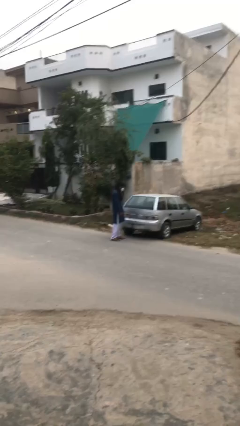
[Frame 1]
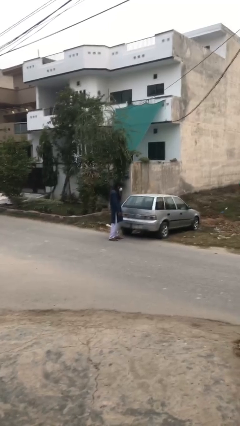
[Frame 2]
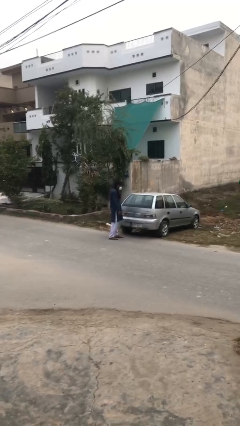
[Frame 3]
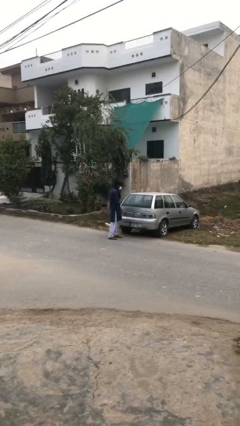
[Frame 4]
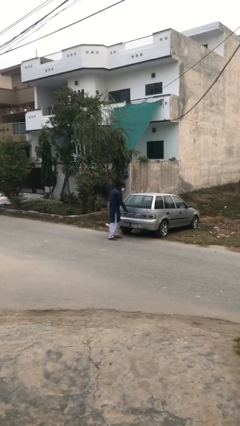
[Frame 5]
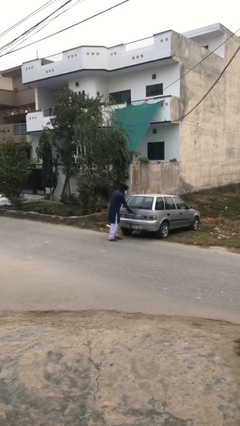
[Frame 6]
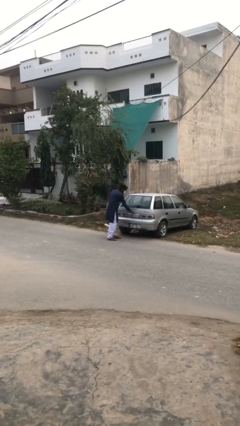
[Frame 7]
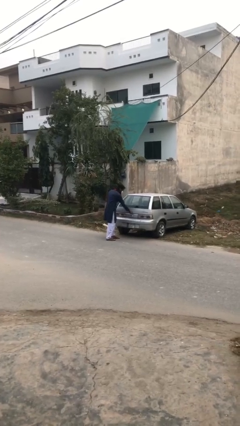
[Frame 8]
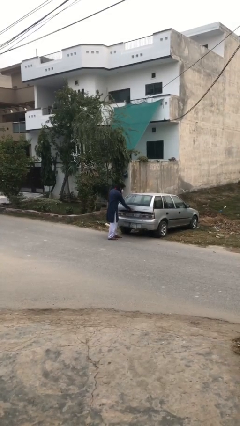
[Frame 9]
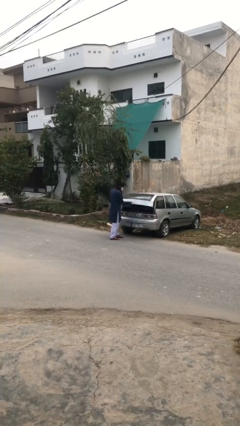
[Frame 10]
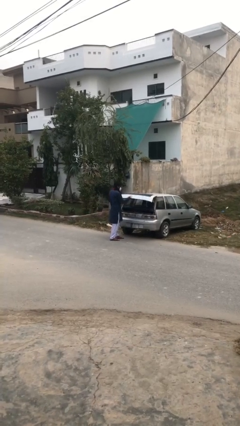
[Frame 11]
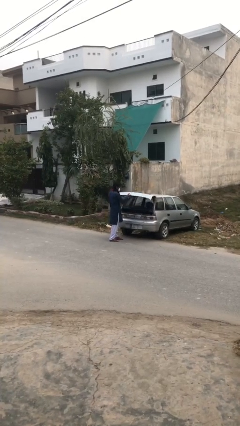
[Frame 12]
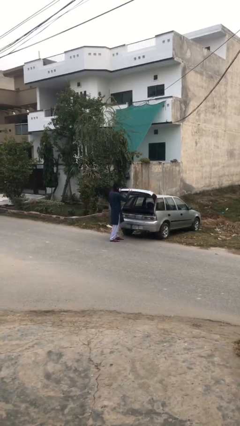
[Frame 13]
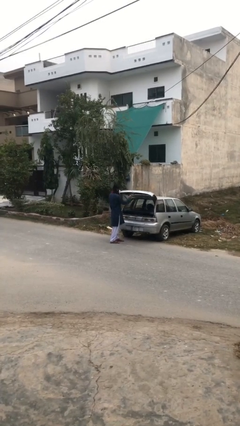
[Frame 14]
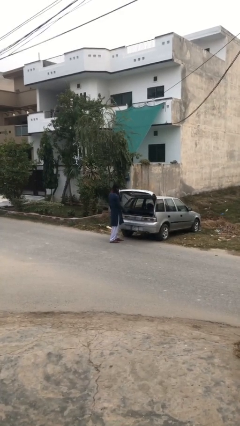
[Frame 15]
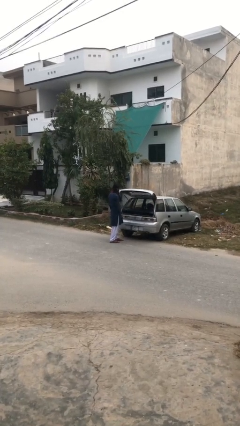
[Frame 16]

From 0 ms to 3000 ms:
person opens car trunk

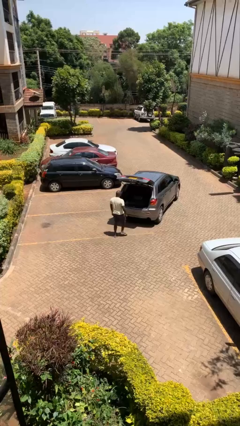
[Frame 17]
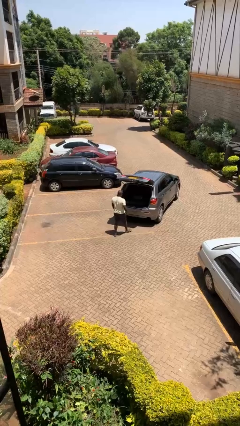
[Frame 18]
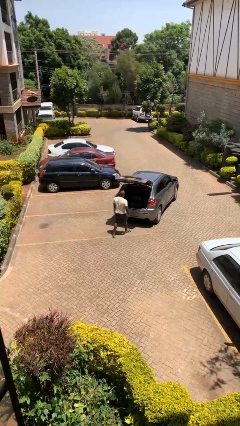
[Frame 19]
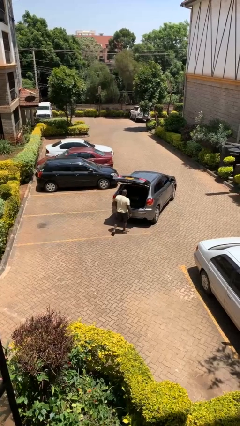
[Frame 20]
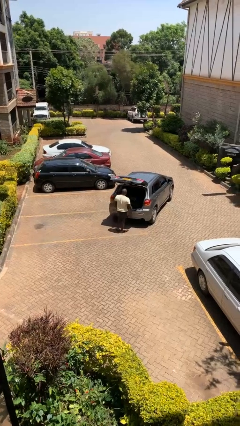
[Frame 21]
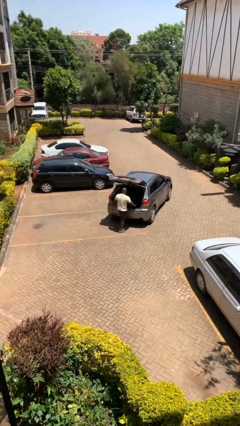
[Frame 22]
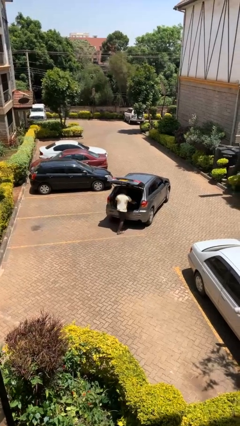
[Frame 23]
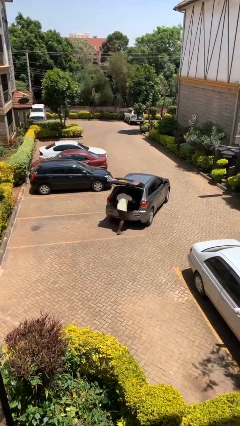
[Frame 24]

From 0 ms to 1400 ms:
person unloads car

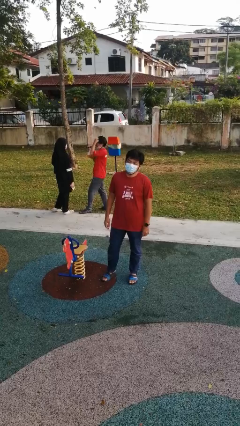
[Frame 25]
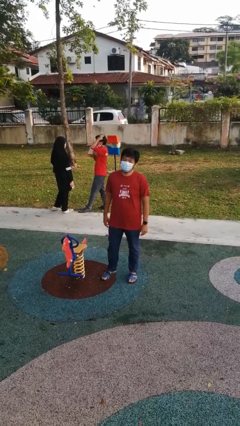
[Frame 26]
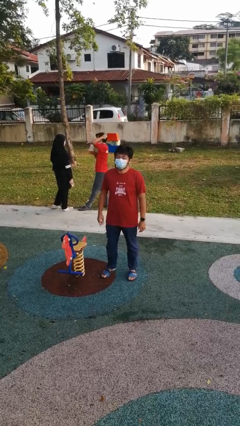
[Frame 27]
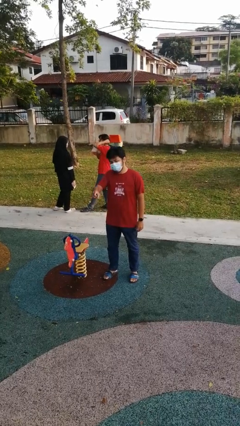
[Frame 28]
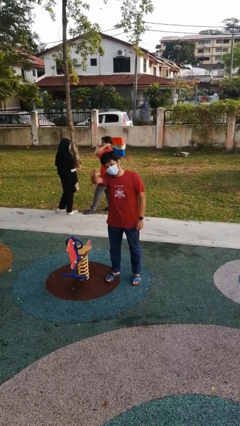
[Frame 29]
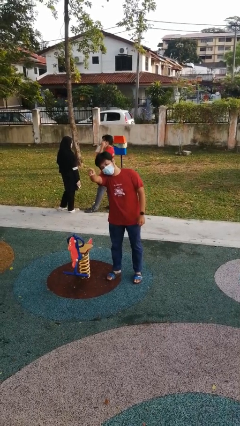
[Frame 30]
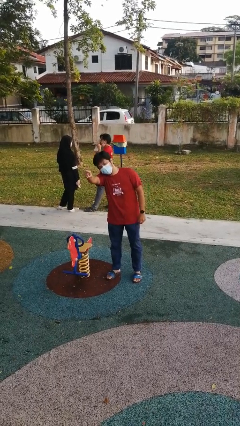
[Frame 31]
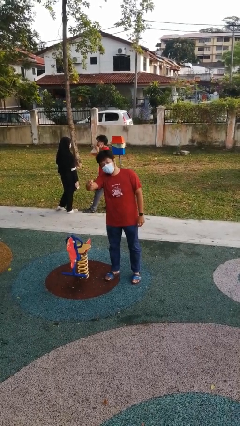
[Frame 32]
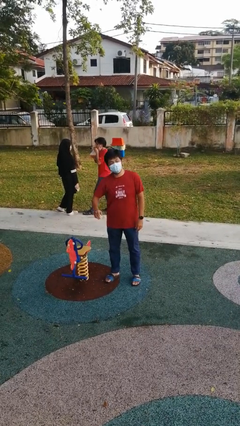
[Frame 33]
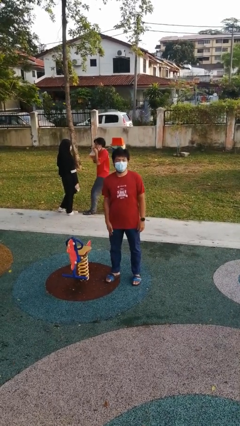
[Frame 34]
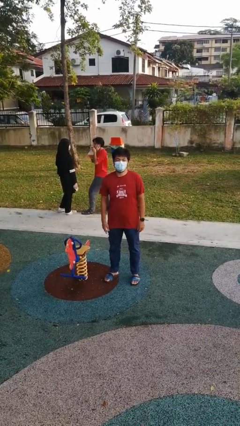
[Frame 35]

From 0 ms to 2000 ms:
person points at person

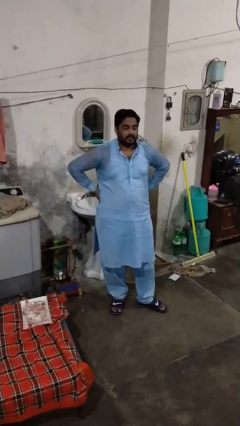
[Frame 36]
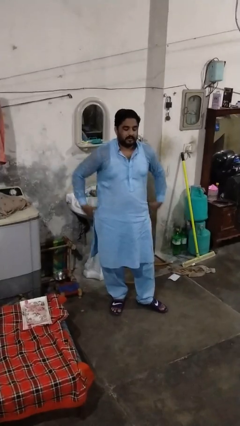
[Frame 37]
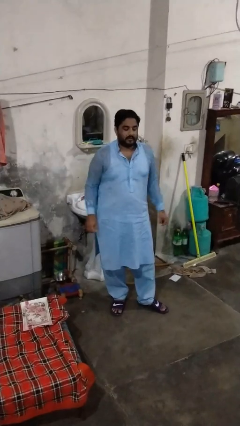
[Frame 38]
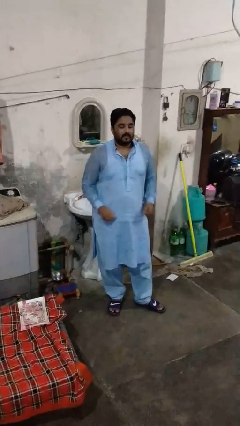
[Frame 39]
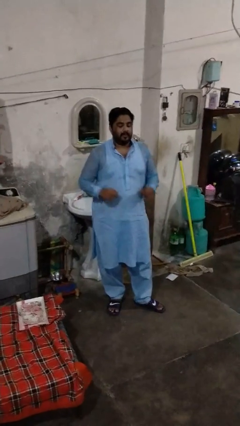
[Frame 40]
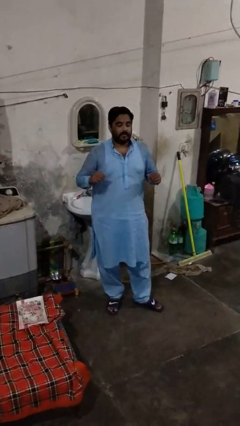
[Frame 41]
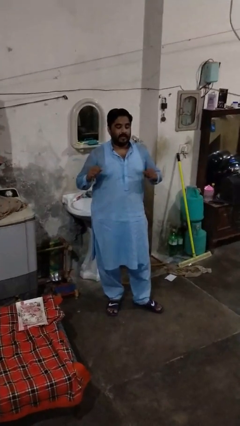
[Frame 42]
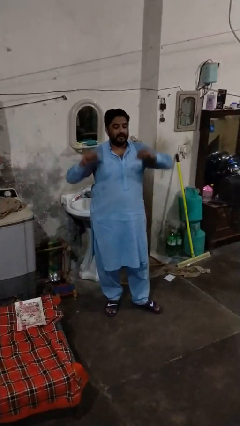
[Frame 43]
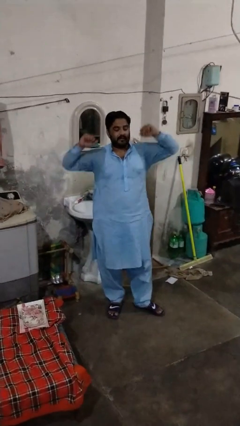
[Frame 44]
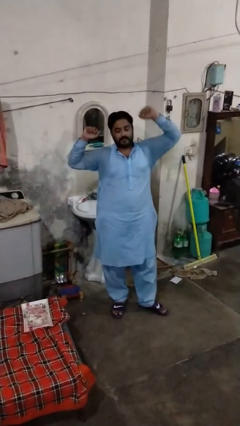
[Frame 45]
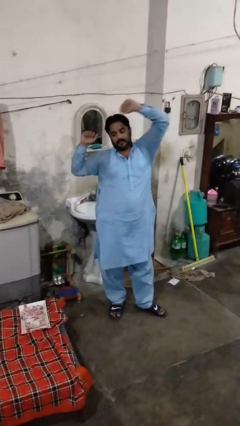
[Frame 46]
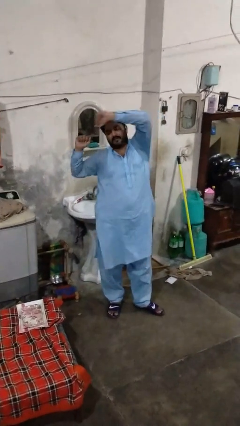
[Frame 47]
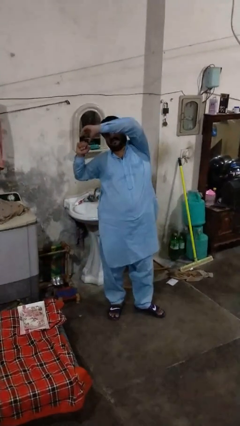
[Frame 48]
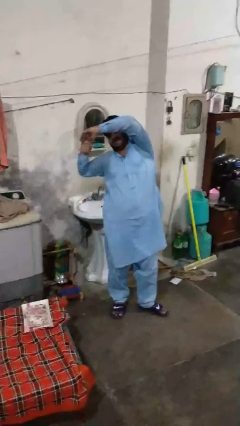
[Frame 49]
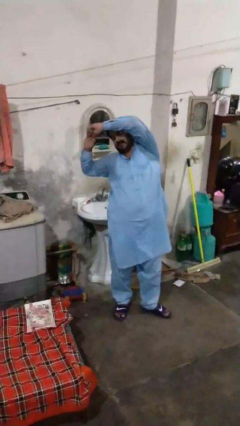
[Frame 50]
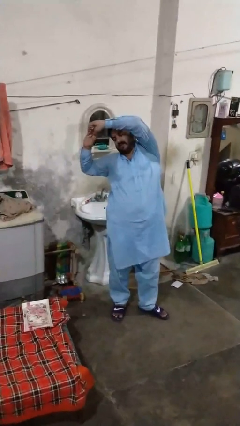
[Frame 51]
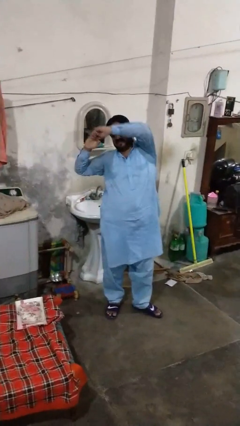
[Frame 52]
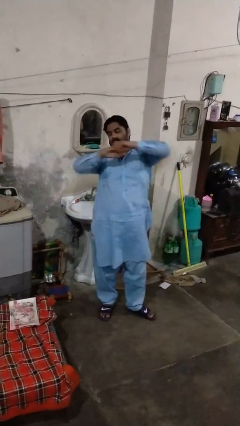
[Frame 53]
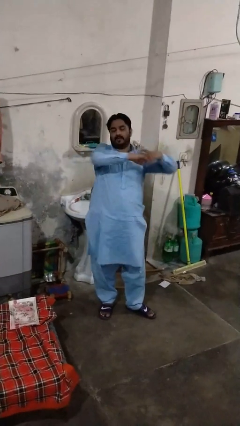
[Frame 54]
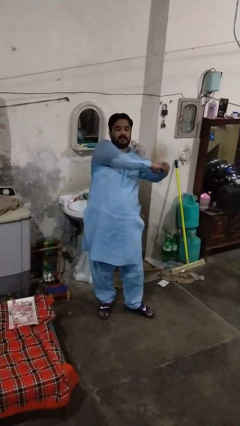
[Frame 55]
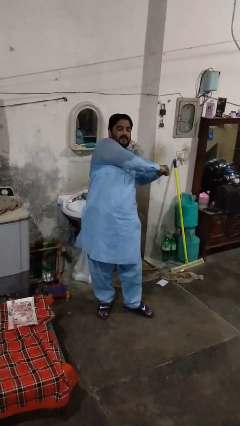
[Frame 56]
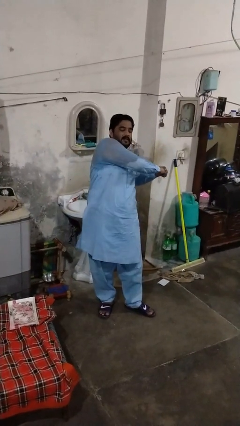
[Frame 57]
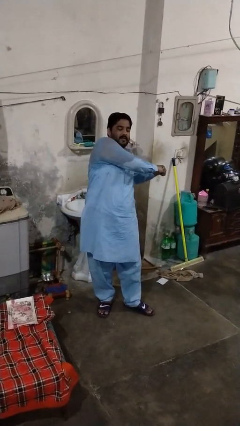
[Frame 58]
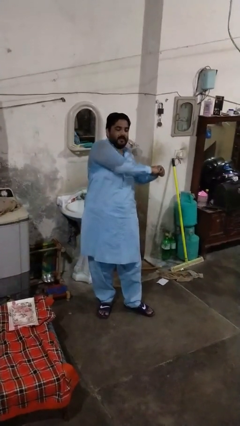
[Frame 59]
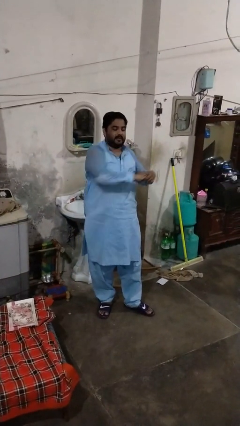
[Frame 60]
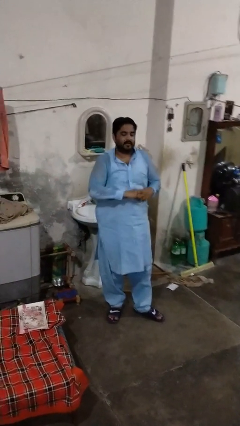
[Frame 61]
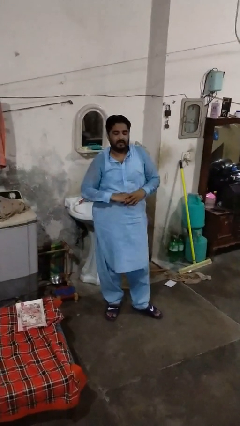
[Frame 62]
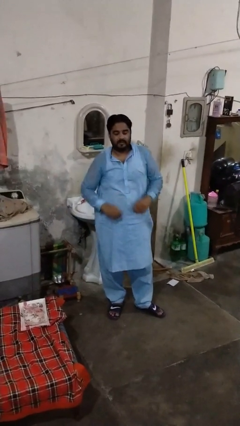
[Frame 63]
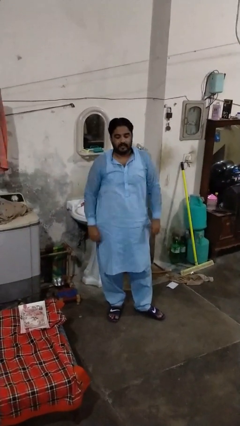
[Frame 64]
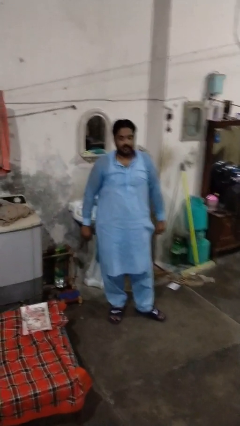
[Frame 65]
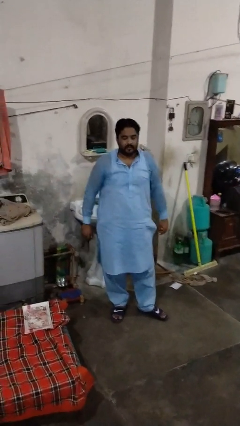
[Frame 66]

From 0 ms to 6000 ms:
person stretches arms to side

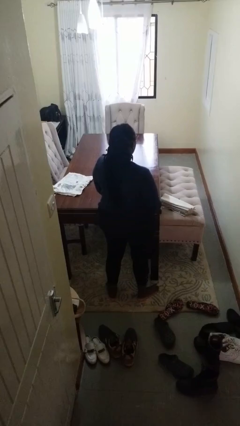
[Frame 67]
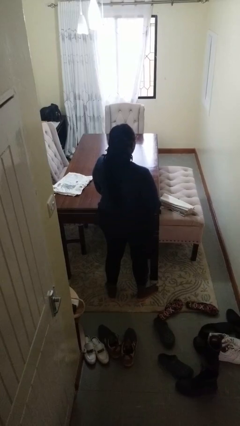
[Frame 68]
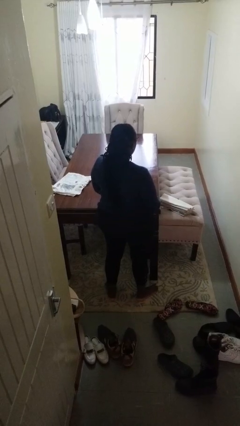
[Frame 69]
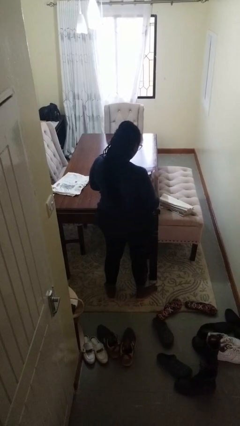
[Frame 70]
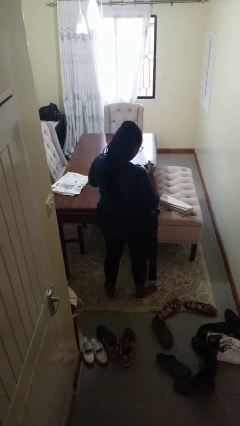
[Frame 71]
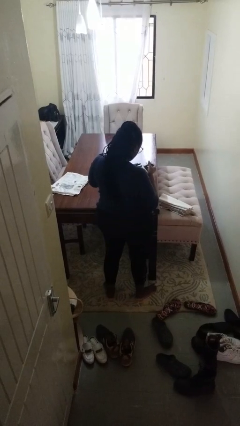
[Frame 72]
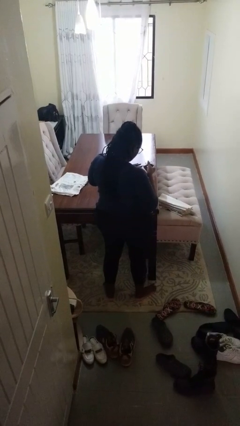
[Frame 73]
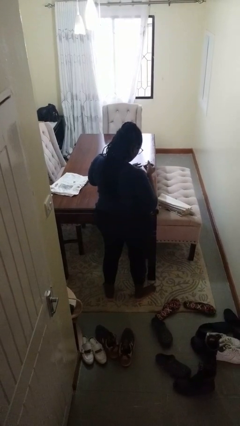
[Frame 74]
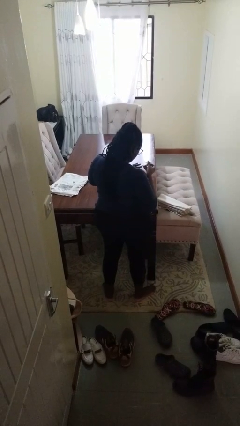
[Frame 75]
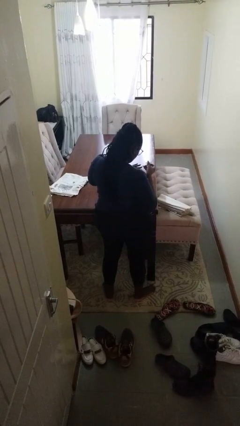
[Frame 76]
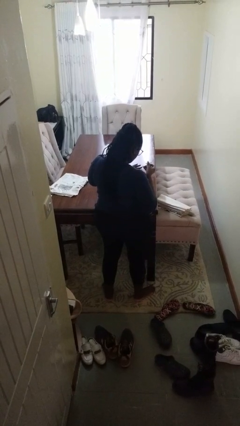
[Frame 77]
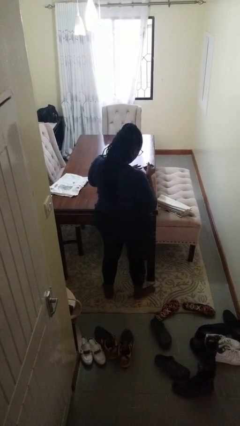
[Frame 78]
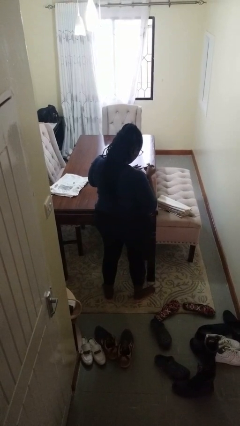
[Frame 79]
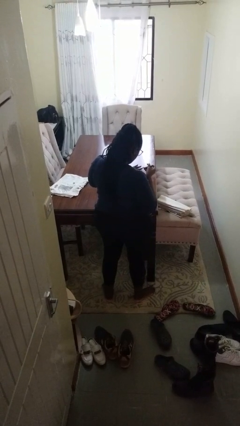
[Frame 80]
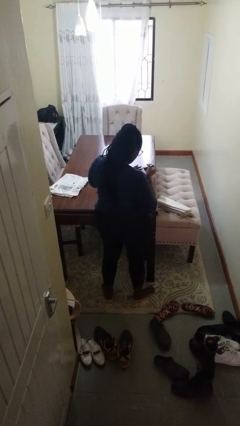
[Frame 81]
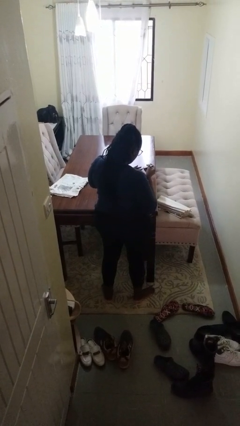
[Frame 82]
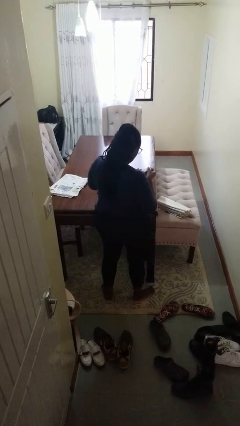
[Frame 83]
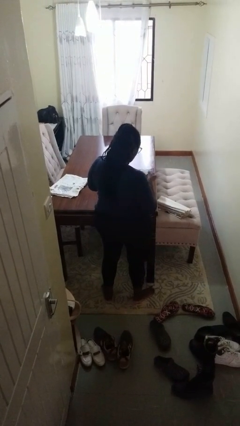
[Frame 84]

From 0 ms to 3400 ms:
person clips fingernails

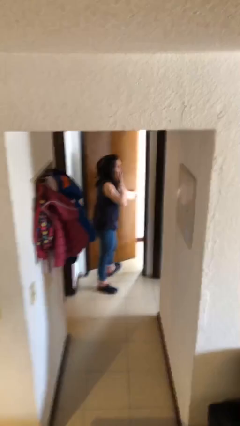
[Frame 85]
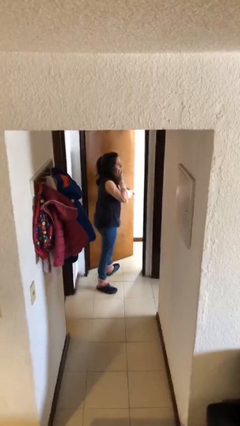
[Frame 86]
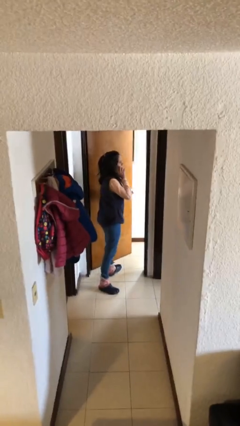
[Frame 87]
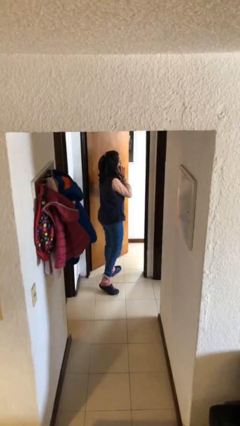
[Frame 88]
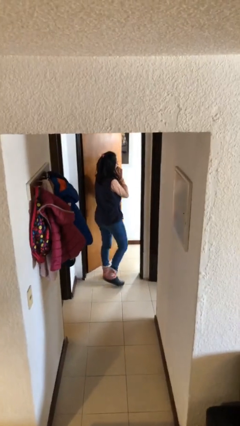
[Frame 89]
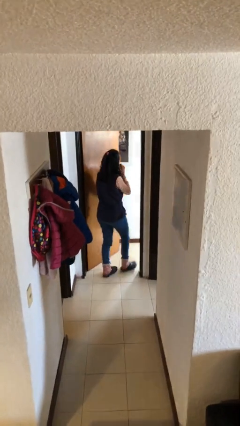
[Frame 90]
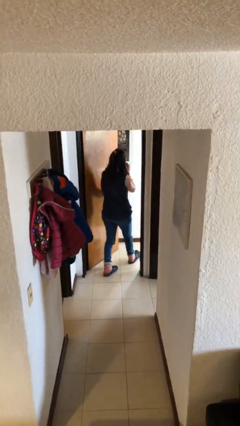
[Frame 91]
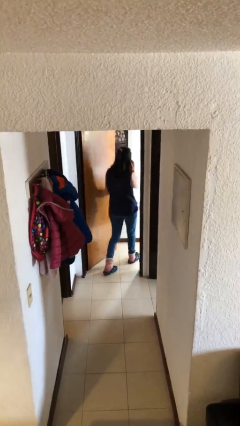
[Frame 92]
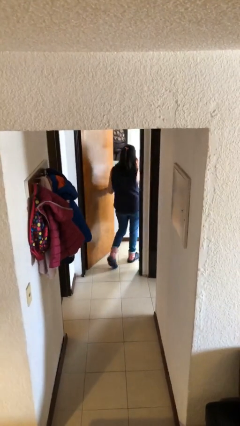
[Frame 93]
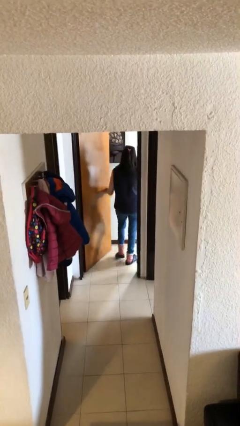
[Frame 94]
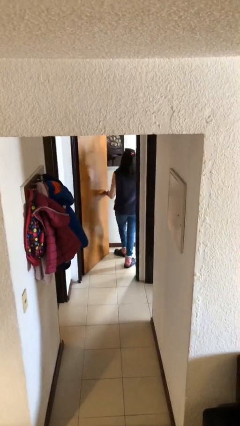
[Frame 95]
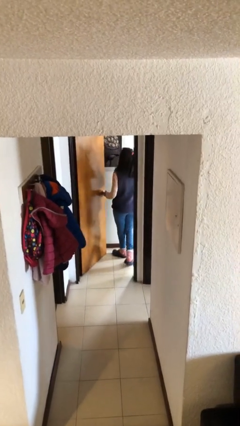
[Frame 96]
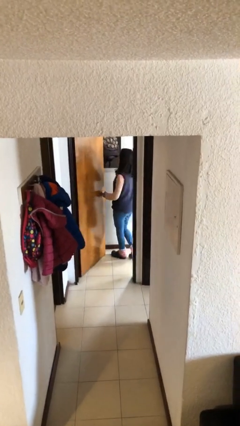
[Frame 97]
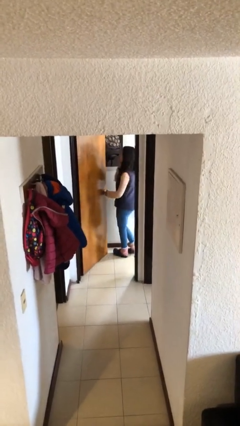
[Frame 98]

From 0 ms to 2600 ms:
person exits scene through structure
